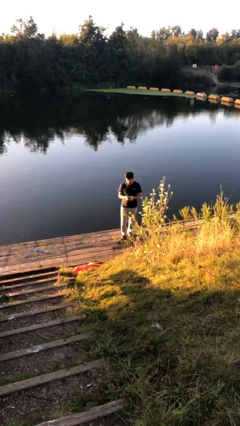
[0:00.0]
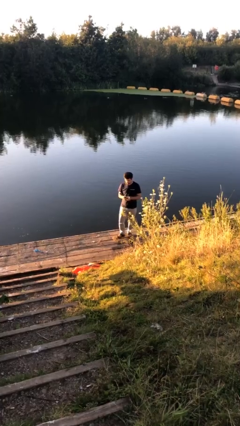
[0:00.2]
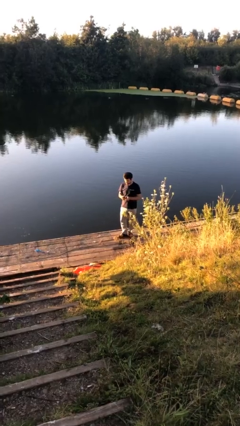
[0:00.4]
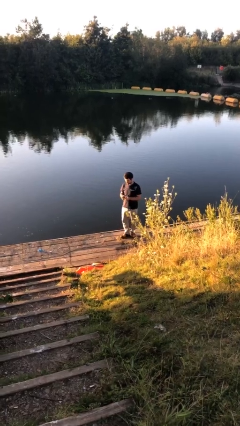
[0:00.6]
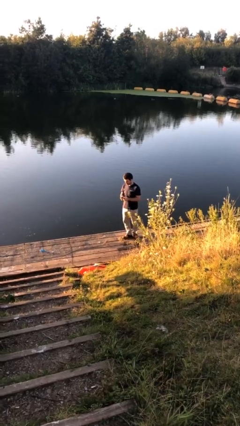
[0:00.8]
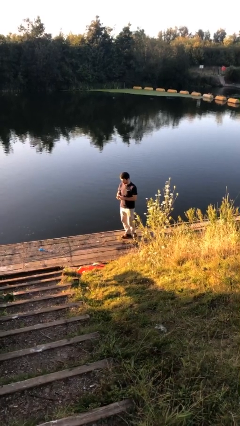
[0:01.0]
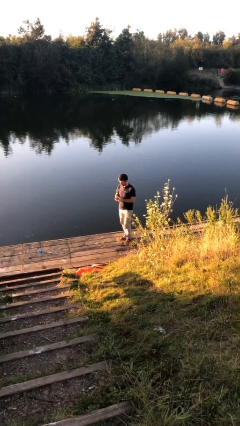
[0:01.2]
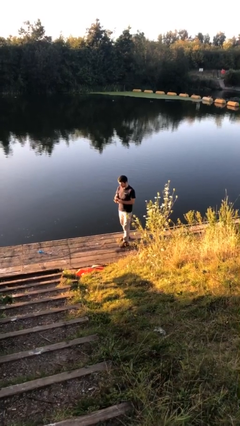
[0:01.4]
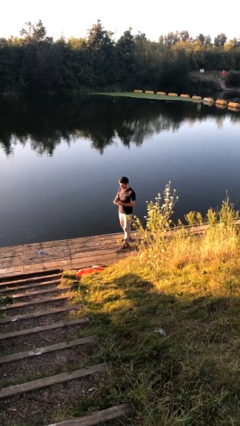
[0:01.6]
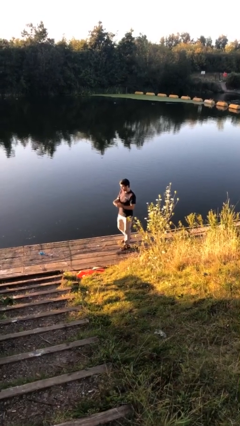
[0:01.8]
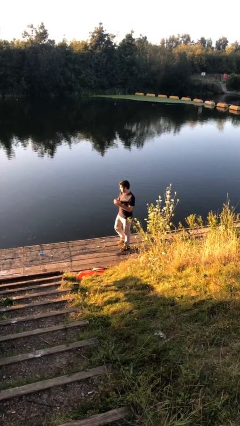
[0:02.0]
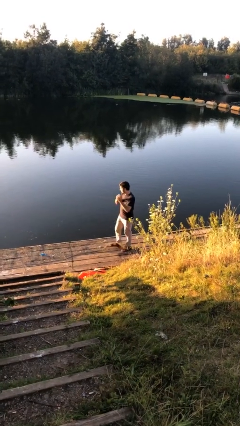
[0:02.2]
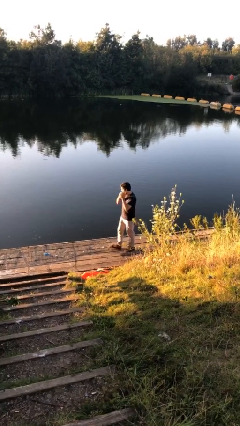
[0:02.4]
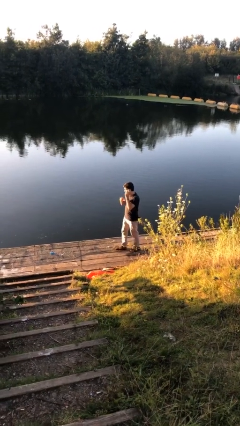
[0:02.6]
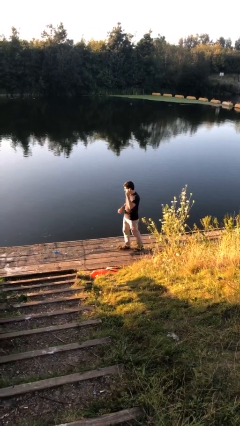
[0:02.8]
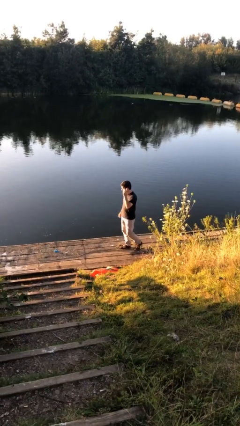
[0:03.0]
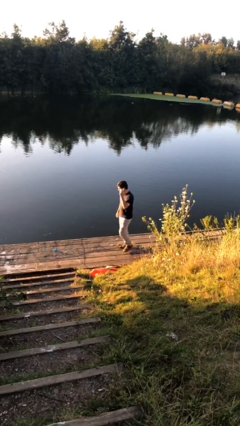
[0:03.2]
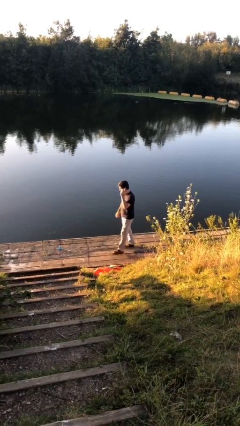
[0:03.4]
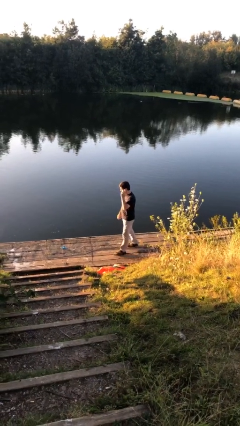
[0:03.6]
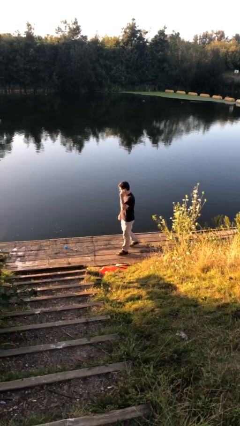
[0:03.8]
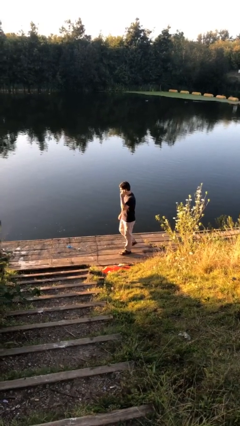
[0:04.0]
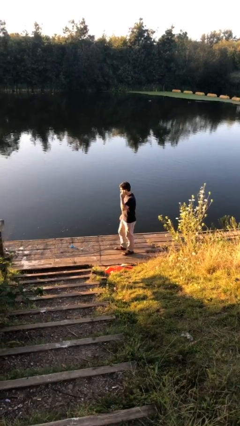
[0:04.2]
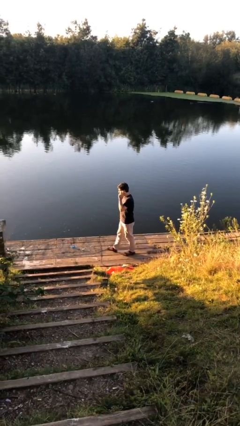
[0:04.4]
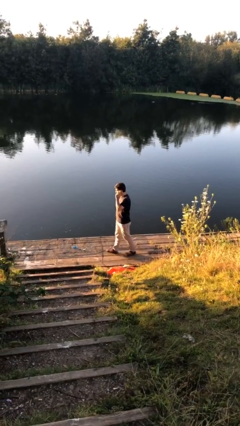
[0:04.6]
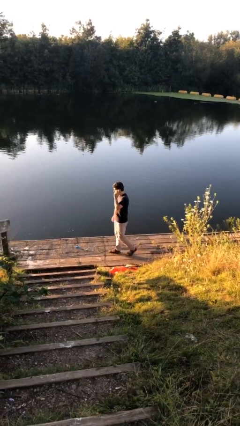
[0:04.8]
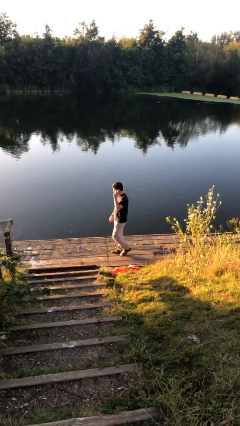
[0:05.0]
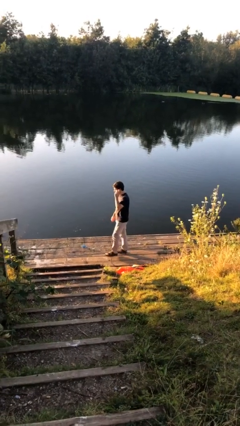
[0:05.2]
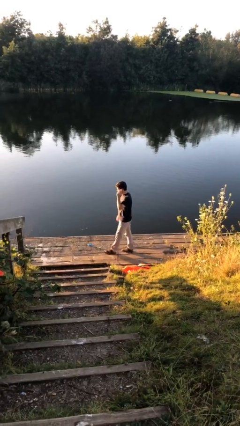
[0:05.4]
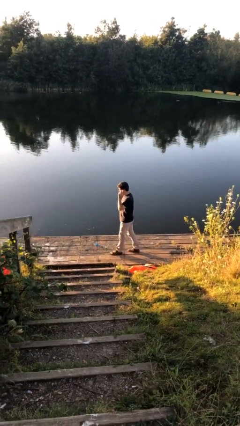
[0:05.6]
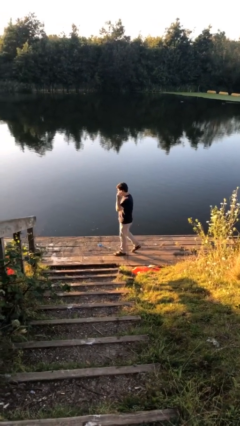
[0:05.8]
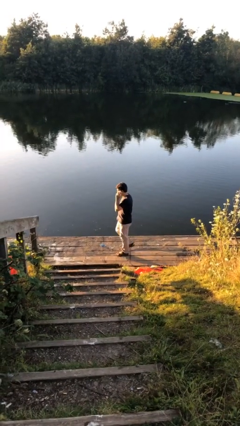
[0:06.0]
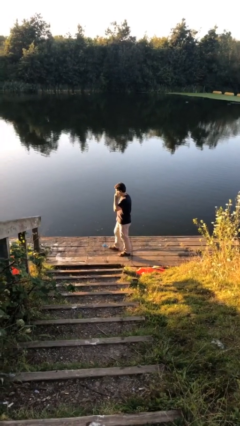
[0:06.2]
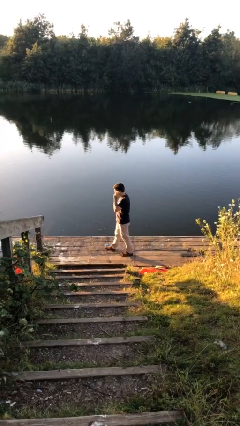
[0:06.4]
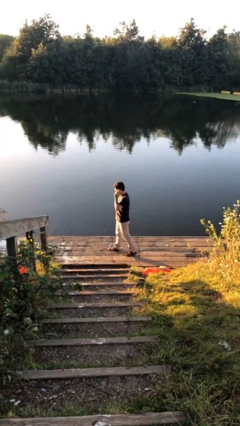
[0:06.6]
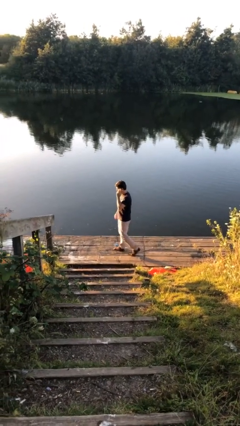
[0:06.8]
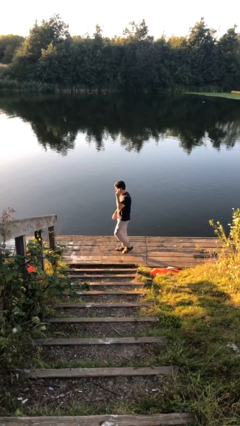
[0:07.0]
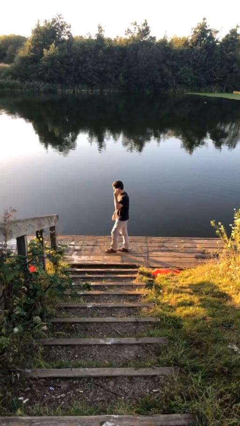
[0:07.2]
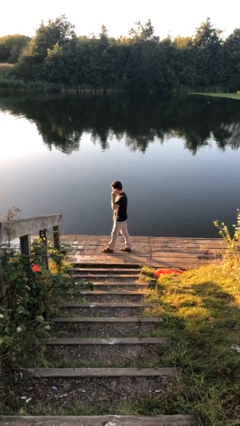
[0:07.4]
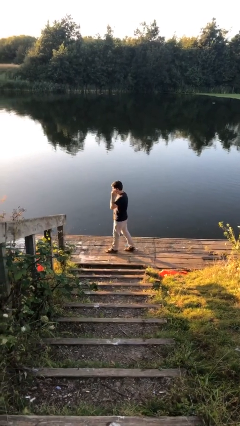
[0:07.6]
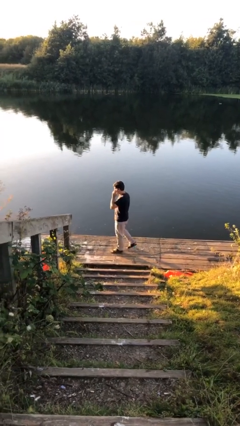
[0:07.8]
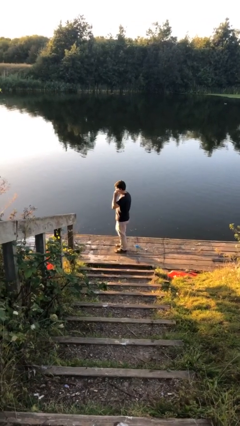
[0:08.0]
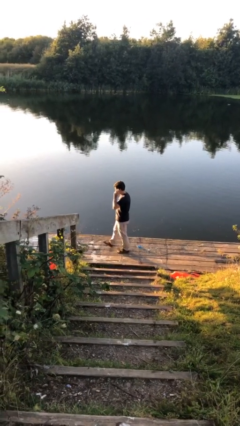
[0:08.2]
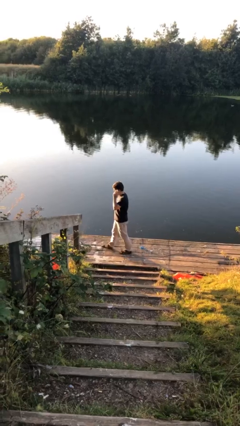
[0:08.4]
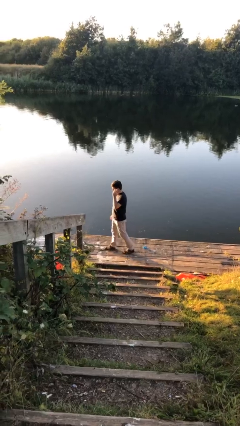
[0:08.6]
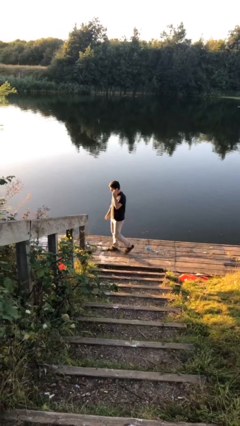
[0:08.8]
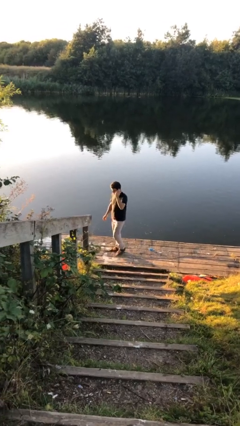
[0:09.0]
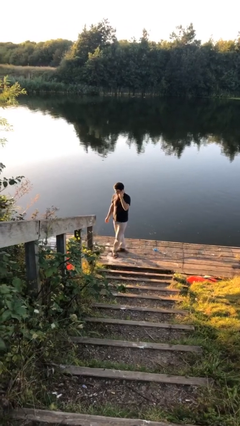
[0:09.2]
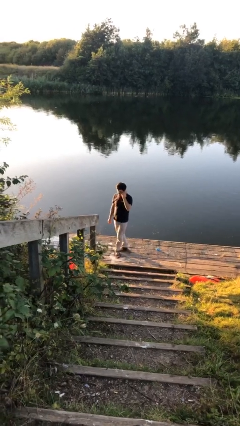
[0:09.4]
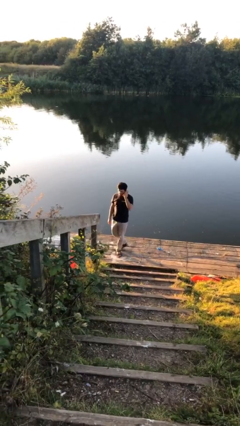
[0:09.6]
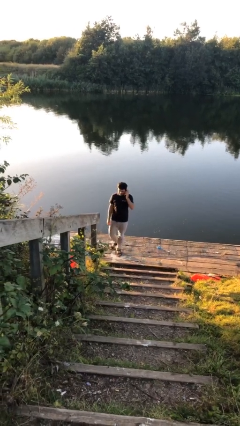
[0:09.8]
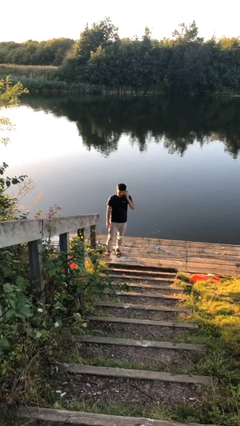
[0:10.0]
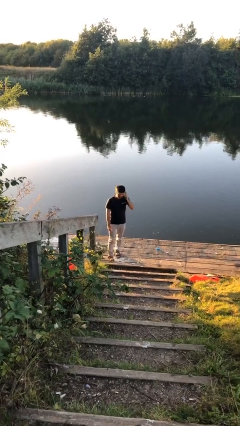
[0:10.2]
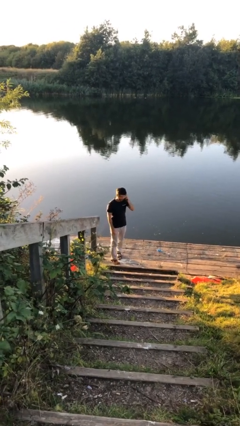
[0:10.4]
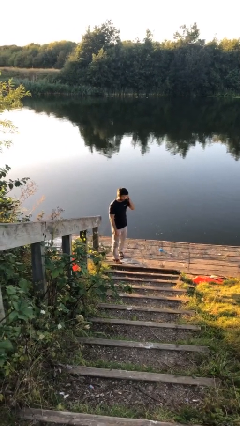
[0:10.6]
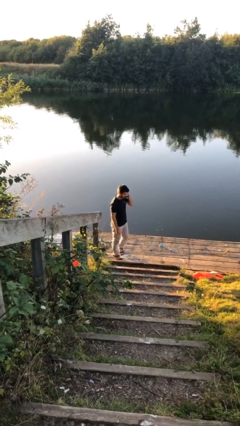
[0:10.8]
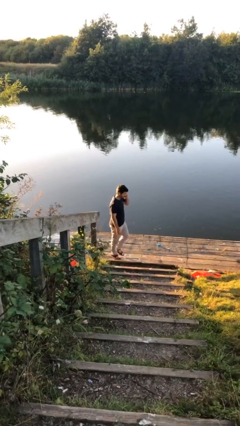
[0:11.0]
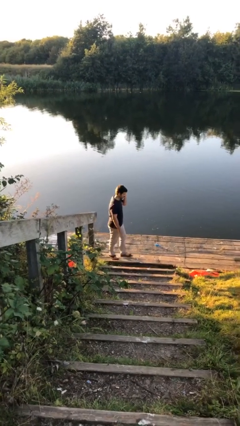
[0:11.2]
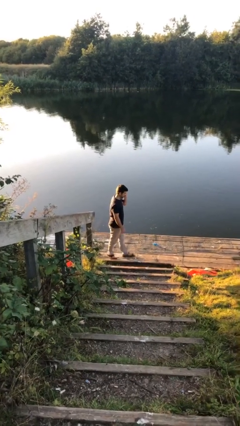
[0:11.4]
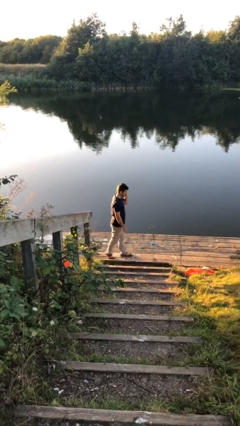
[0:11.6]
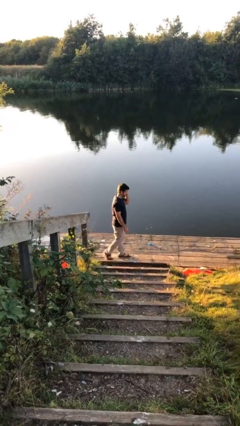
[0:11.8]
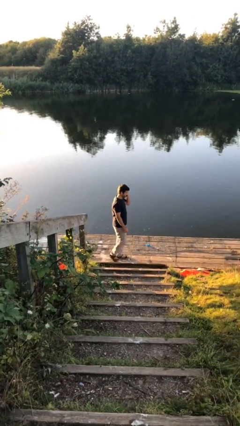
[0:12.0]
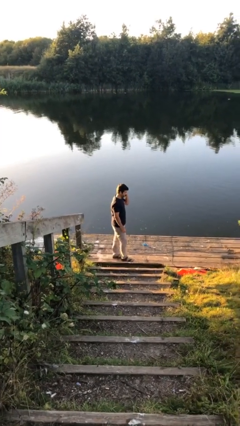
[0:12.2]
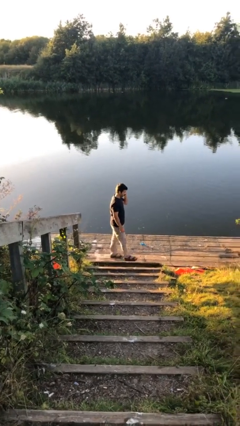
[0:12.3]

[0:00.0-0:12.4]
person talks on phone

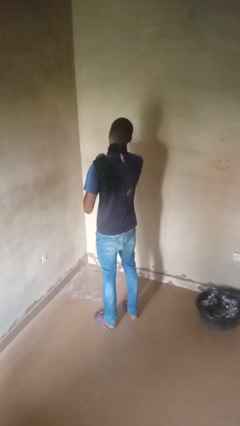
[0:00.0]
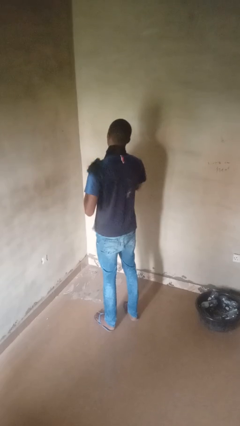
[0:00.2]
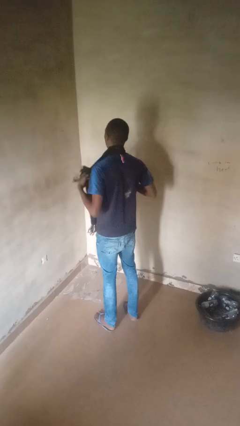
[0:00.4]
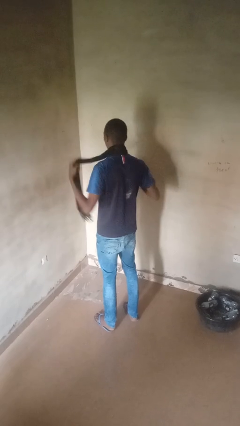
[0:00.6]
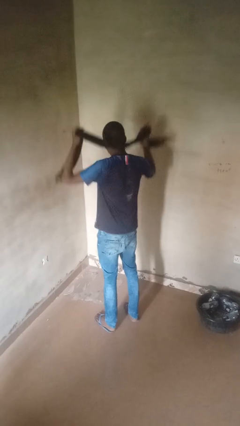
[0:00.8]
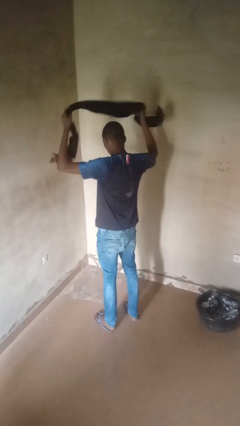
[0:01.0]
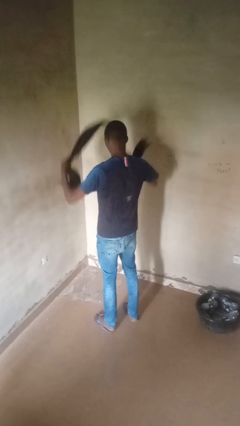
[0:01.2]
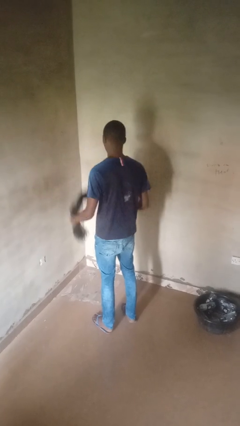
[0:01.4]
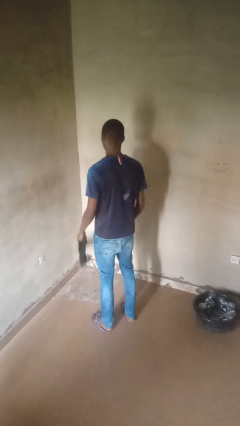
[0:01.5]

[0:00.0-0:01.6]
person takes off scarf

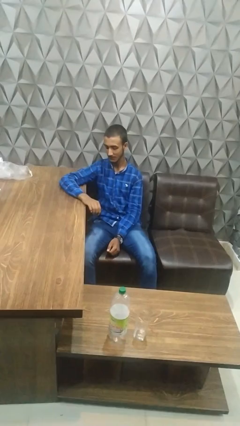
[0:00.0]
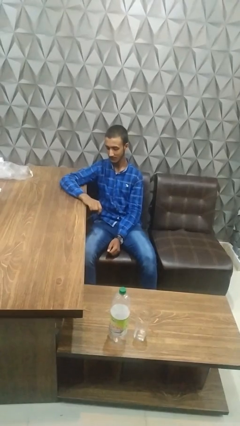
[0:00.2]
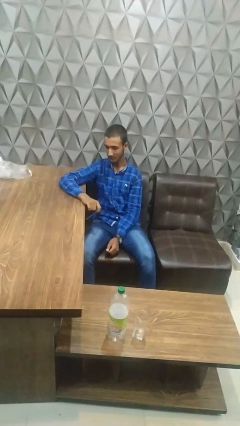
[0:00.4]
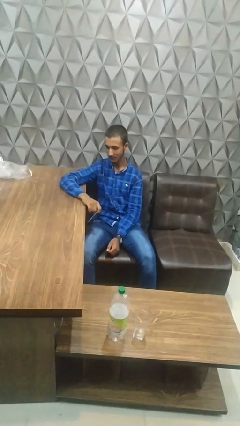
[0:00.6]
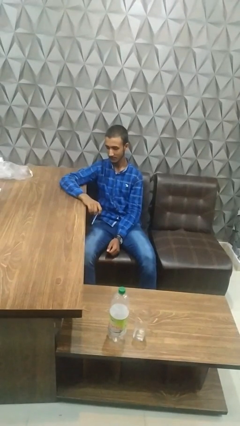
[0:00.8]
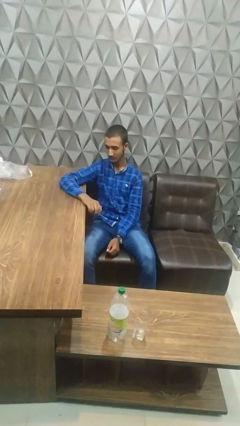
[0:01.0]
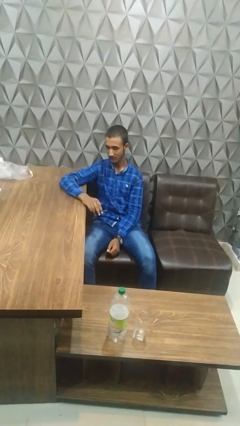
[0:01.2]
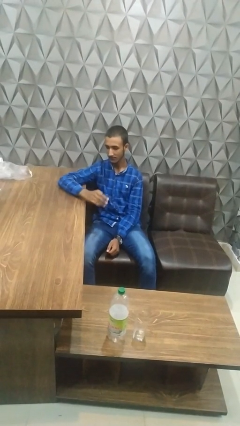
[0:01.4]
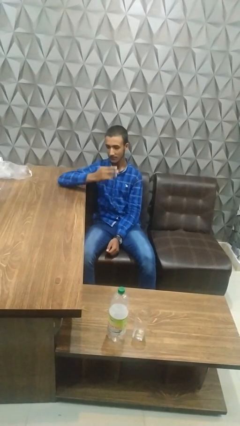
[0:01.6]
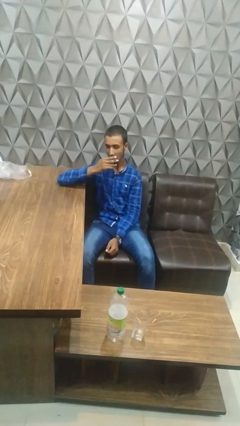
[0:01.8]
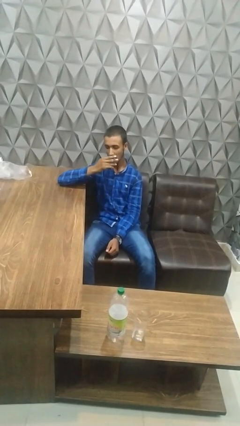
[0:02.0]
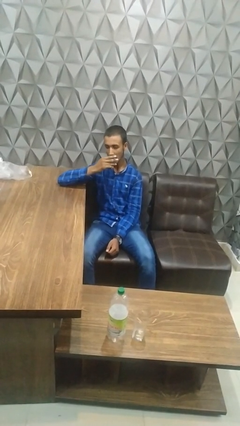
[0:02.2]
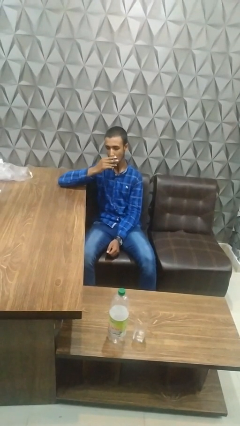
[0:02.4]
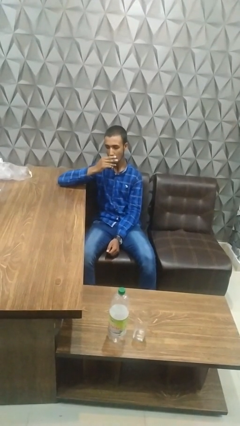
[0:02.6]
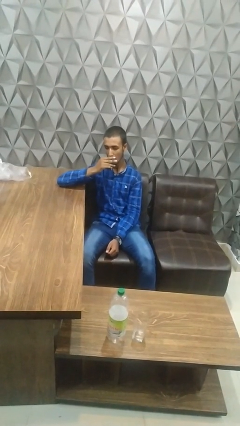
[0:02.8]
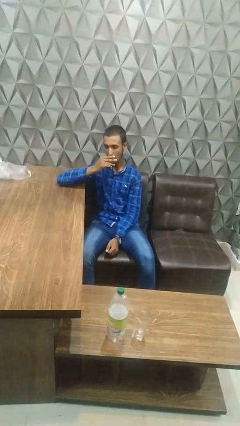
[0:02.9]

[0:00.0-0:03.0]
person vapes

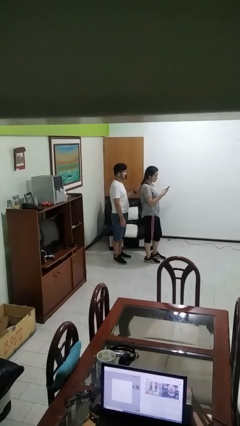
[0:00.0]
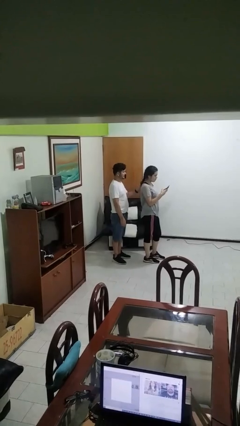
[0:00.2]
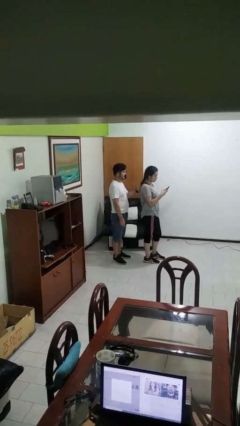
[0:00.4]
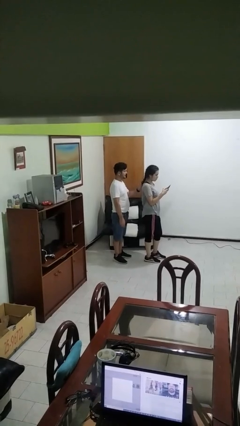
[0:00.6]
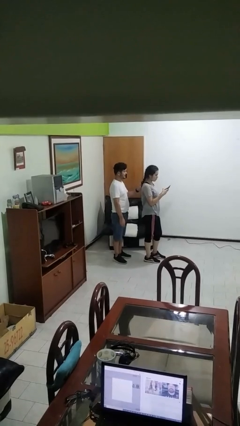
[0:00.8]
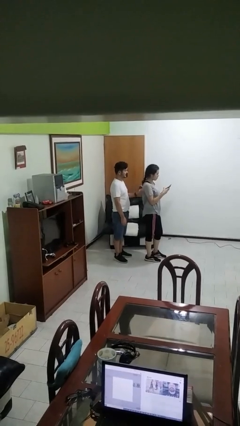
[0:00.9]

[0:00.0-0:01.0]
person touches back of person
